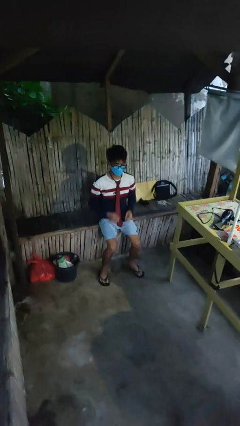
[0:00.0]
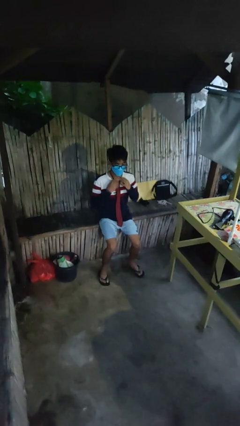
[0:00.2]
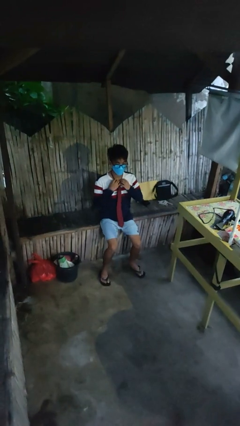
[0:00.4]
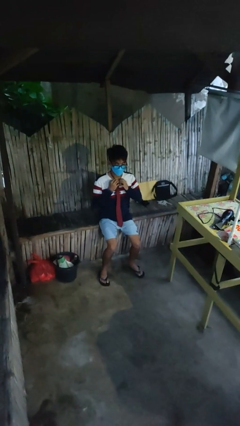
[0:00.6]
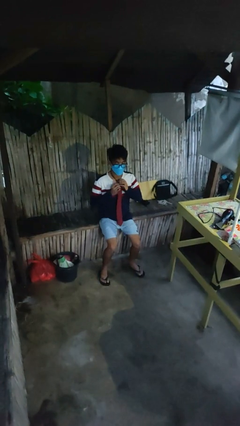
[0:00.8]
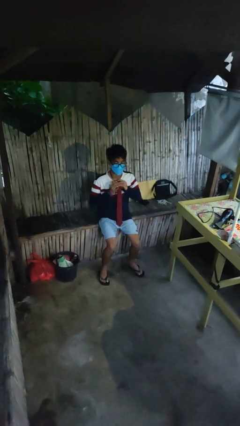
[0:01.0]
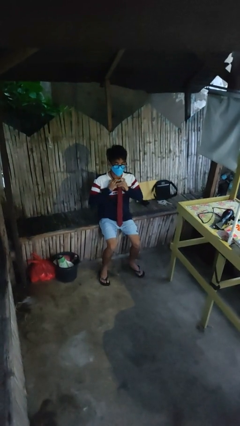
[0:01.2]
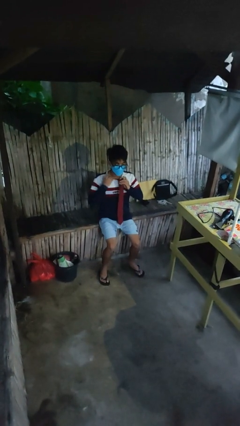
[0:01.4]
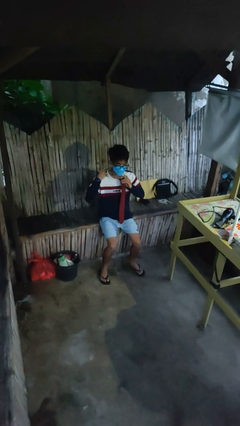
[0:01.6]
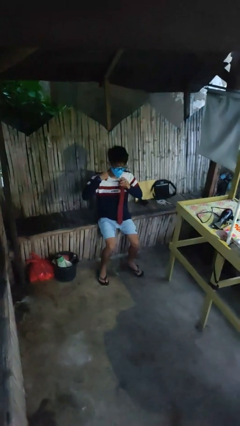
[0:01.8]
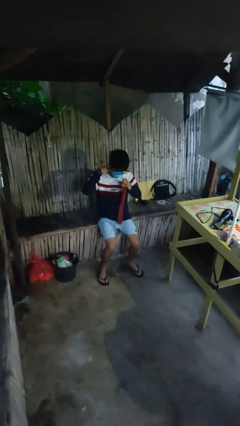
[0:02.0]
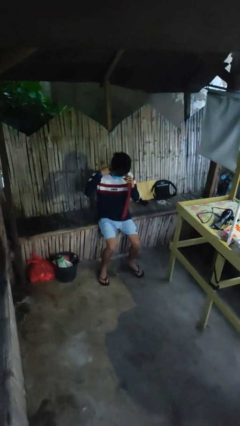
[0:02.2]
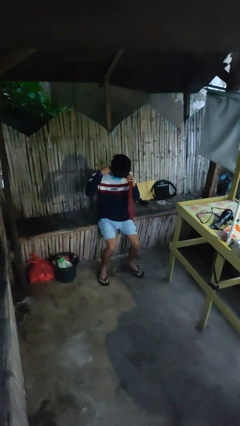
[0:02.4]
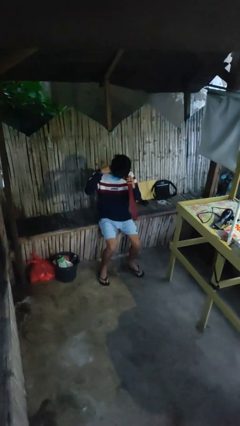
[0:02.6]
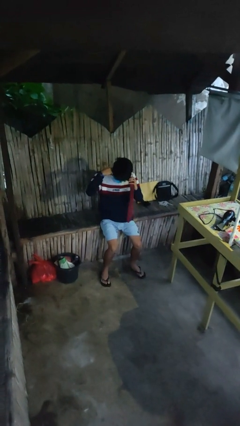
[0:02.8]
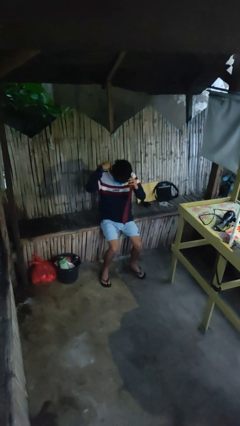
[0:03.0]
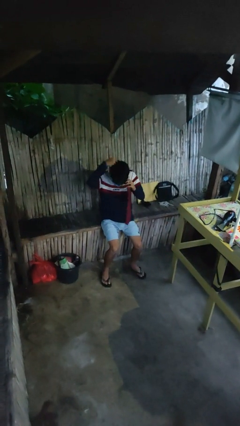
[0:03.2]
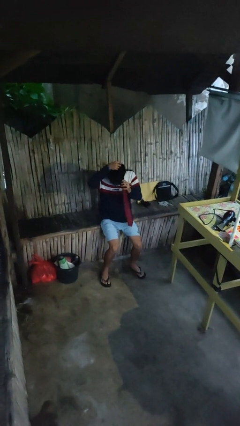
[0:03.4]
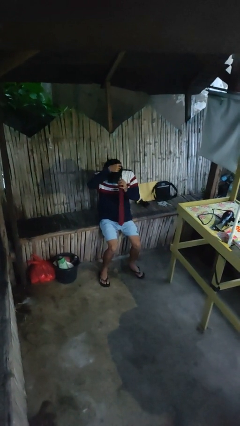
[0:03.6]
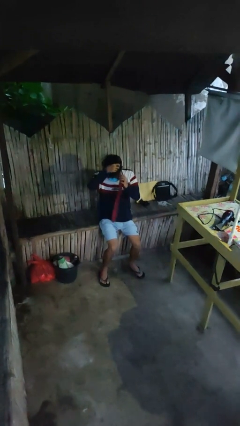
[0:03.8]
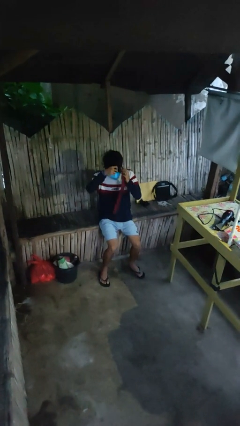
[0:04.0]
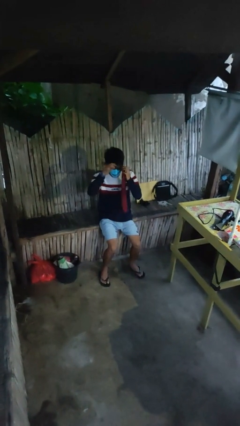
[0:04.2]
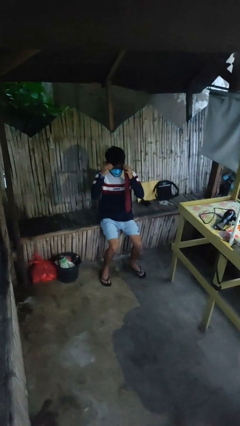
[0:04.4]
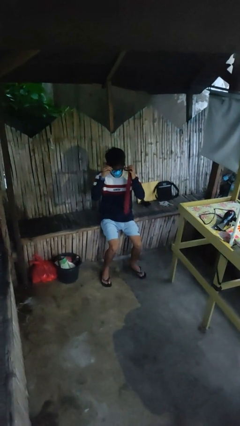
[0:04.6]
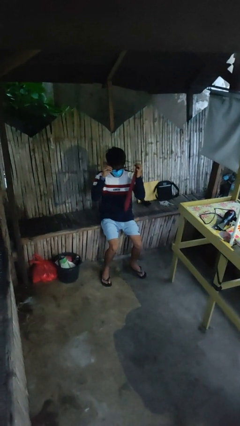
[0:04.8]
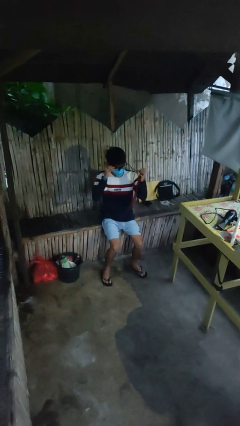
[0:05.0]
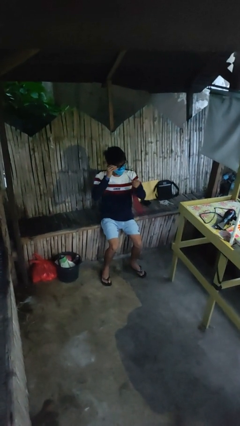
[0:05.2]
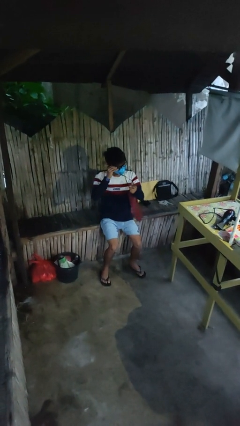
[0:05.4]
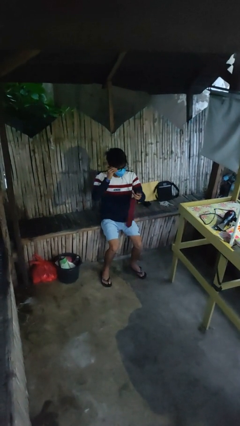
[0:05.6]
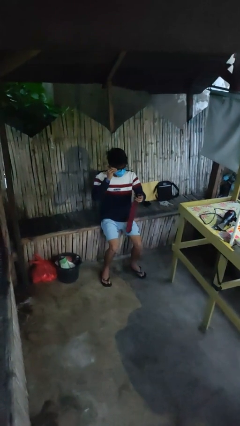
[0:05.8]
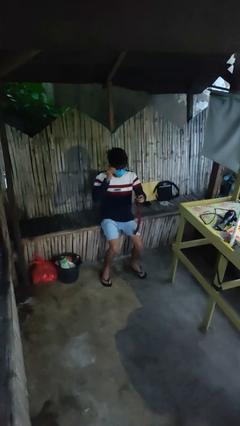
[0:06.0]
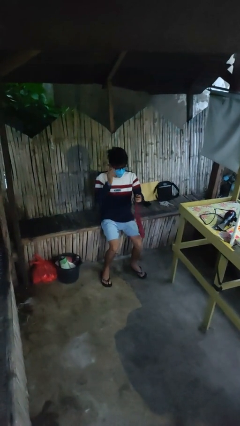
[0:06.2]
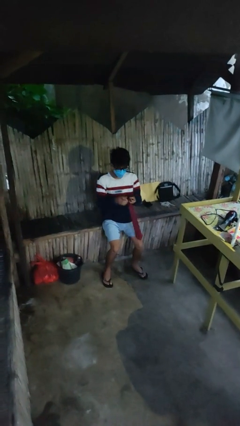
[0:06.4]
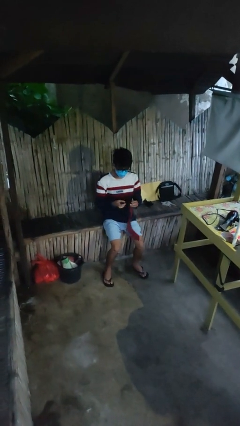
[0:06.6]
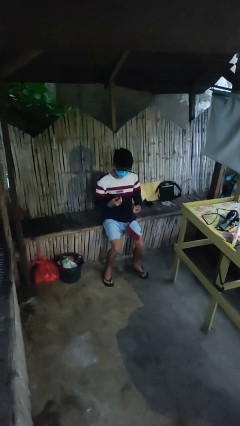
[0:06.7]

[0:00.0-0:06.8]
person takes off necktie

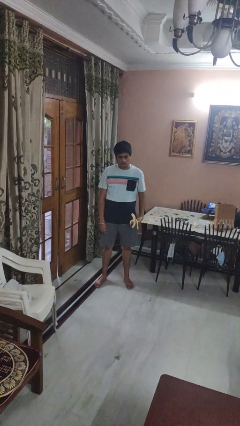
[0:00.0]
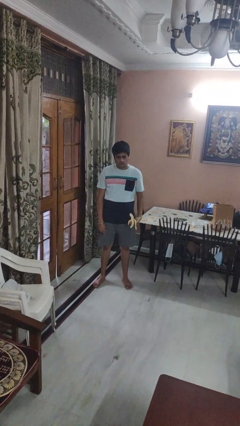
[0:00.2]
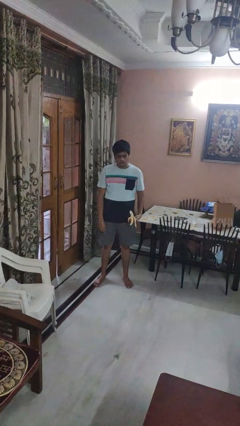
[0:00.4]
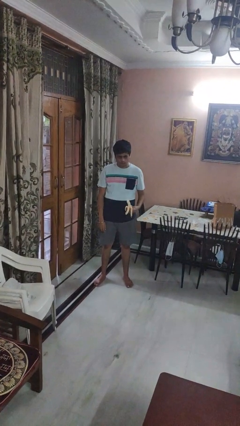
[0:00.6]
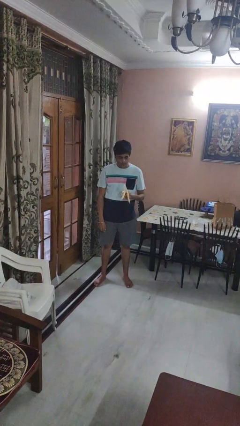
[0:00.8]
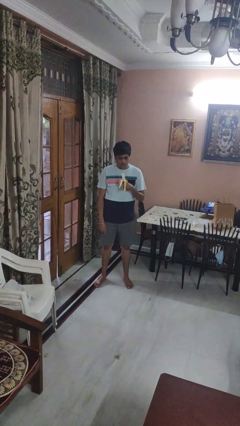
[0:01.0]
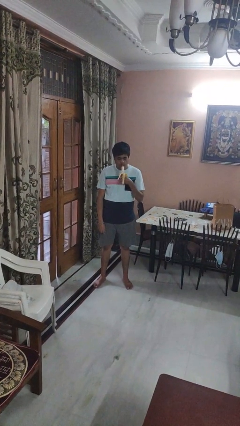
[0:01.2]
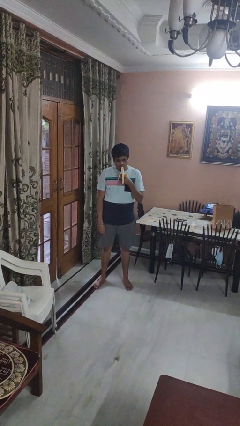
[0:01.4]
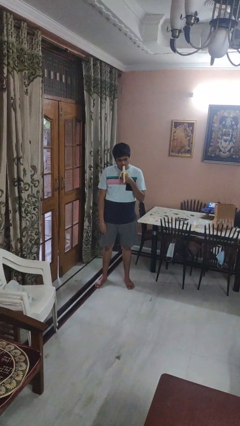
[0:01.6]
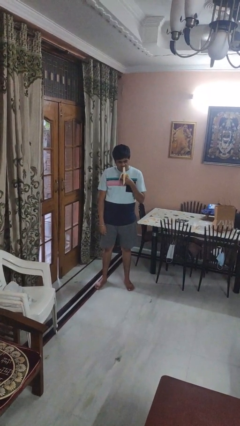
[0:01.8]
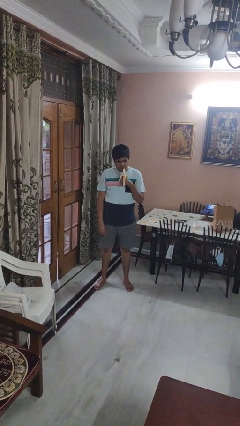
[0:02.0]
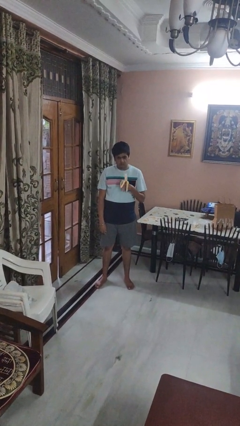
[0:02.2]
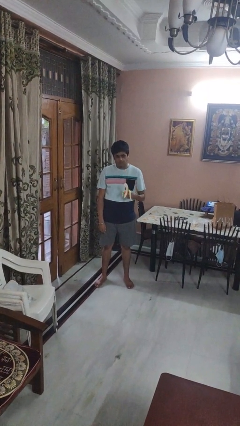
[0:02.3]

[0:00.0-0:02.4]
person eats banana

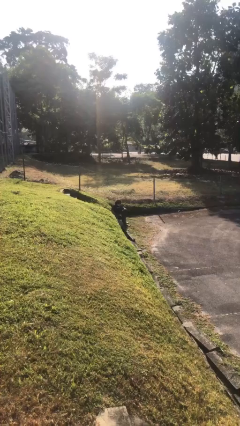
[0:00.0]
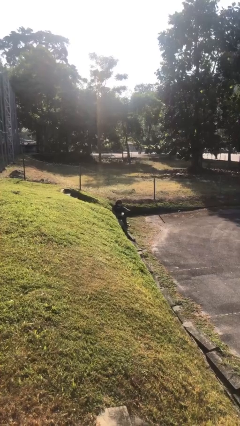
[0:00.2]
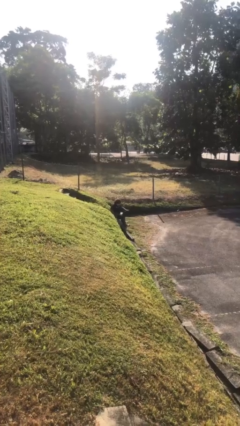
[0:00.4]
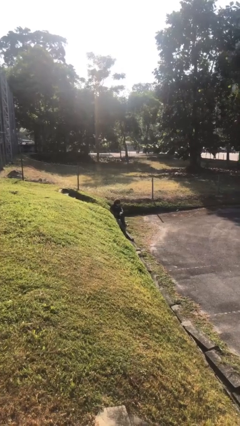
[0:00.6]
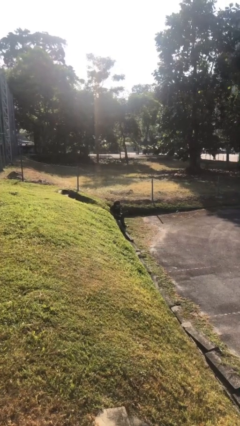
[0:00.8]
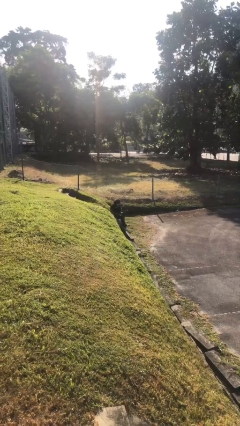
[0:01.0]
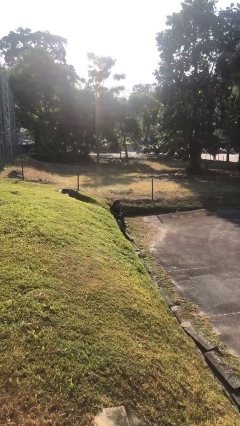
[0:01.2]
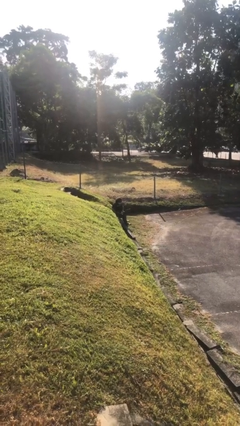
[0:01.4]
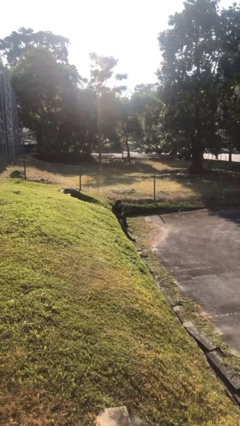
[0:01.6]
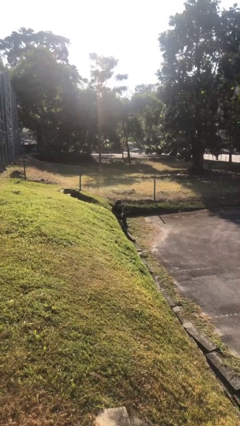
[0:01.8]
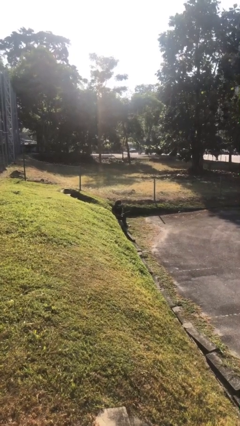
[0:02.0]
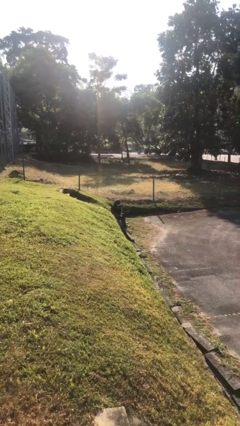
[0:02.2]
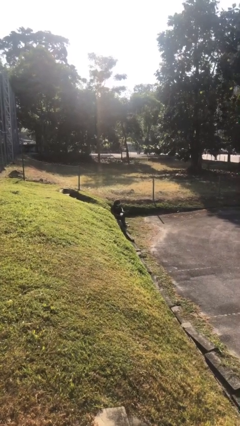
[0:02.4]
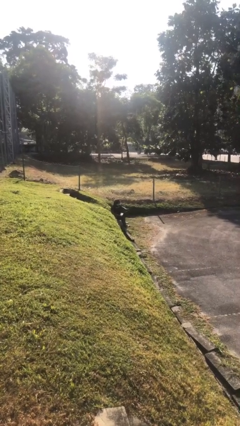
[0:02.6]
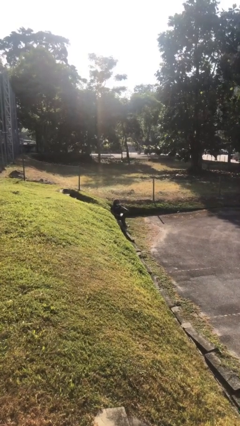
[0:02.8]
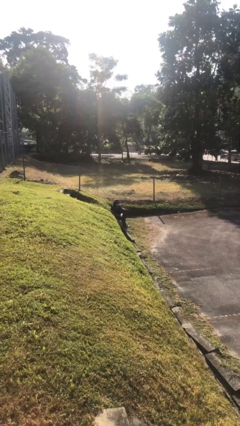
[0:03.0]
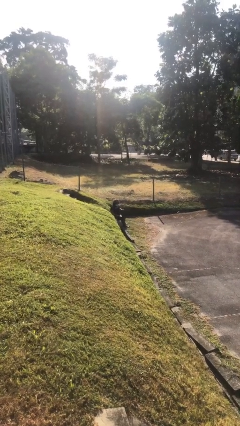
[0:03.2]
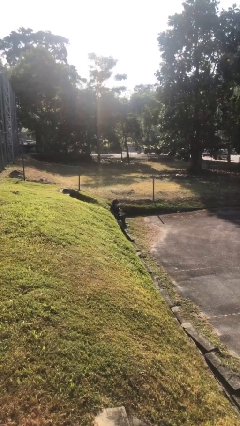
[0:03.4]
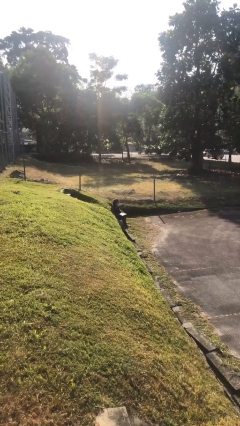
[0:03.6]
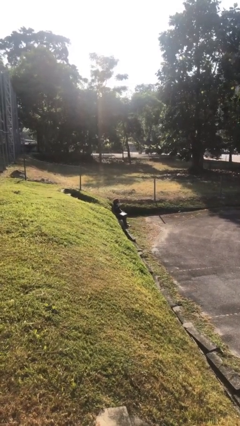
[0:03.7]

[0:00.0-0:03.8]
person interacts with laptop

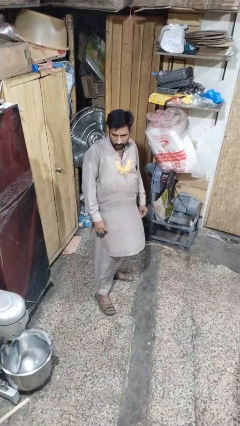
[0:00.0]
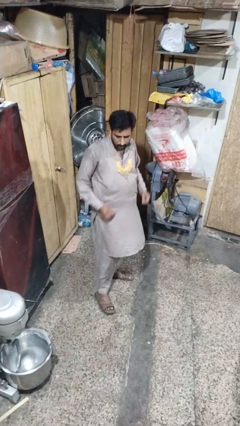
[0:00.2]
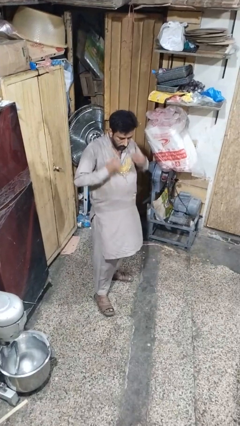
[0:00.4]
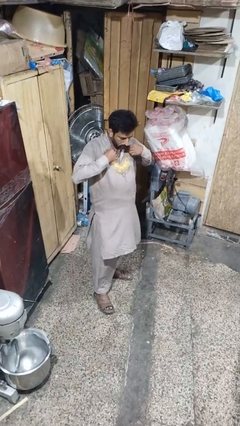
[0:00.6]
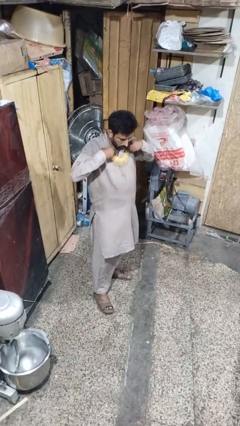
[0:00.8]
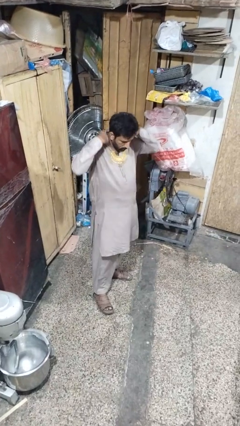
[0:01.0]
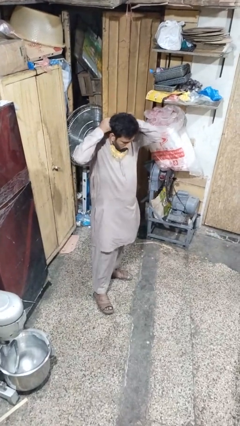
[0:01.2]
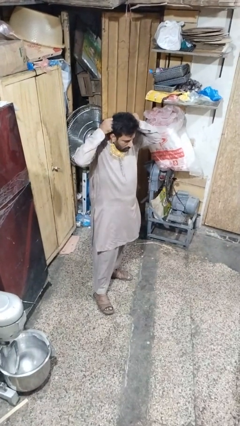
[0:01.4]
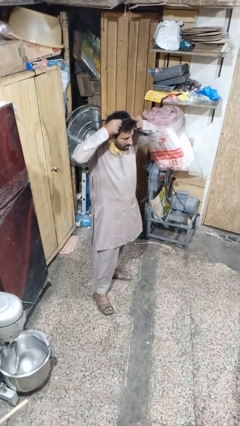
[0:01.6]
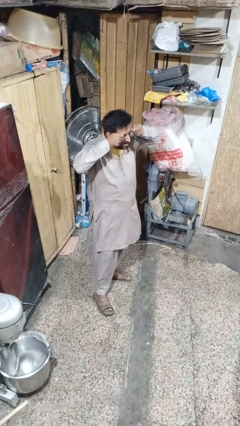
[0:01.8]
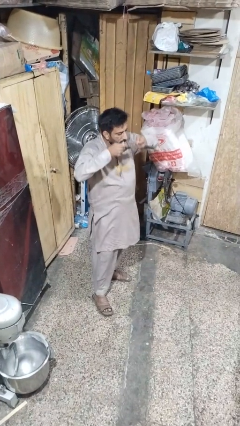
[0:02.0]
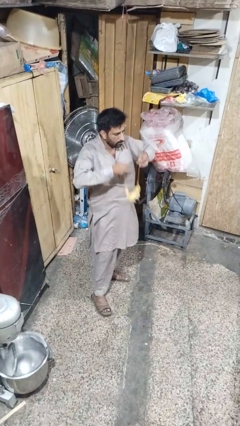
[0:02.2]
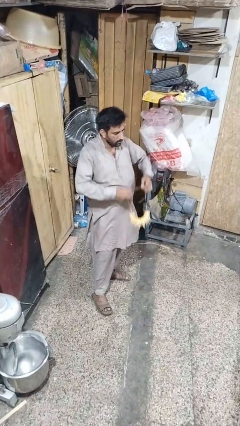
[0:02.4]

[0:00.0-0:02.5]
person takes off necklace

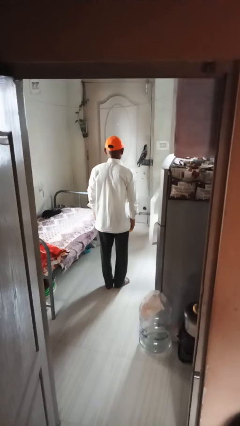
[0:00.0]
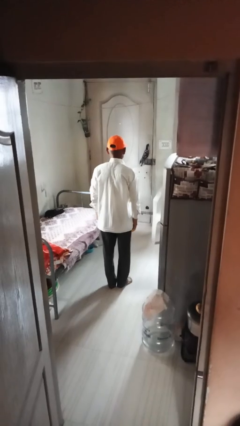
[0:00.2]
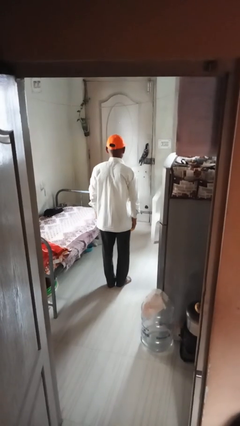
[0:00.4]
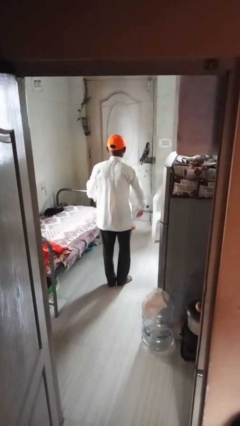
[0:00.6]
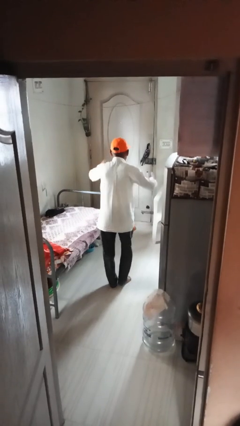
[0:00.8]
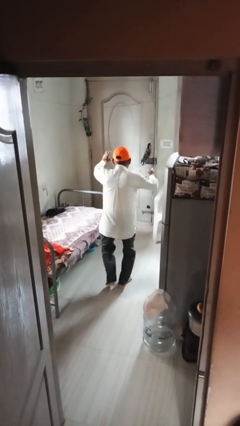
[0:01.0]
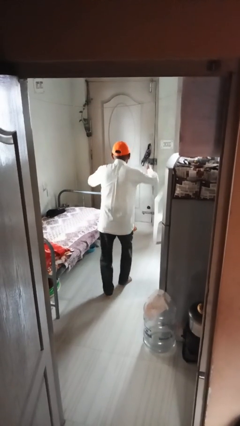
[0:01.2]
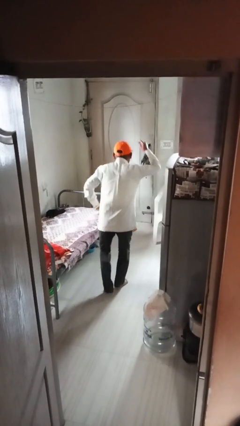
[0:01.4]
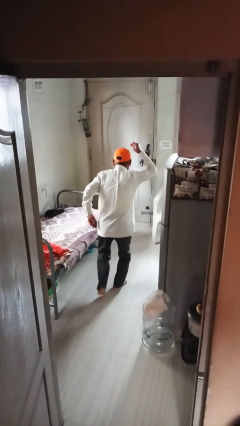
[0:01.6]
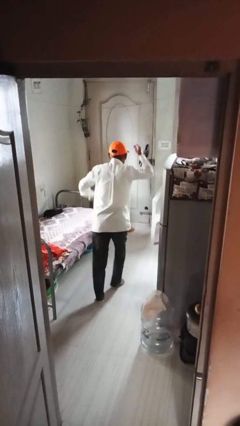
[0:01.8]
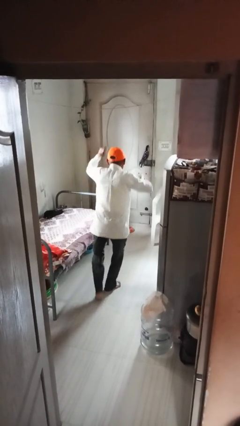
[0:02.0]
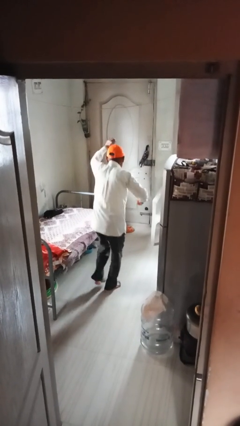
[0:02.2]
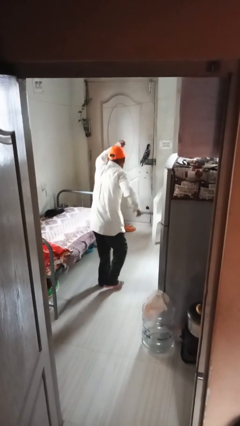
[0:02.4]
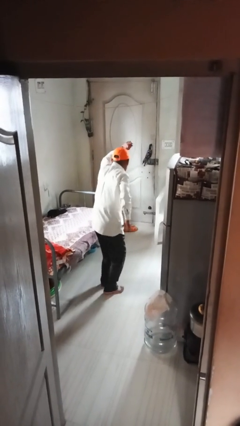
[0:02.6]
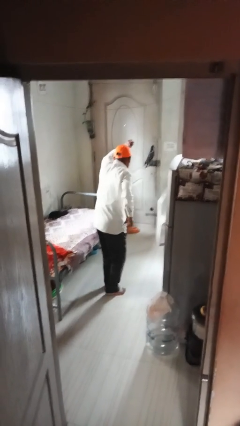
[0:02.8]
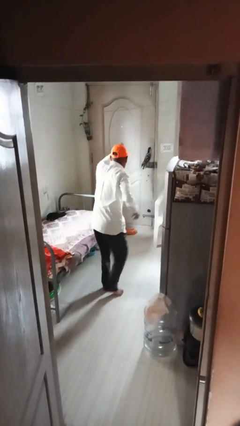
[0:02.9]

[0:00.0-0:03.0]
person dances in place
